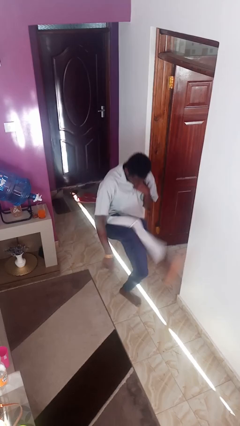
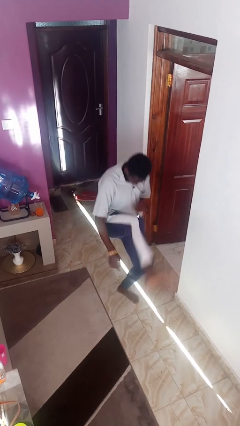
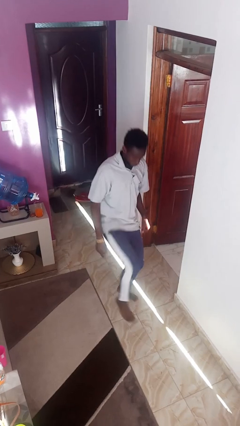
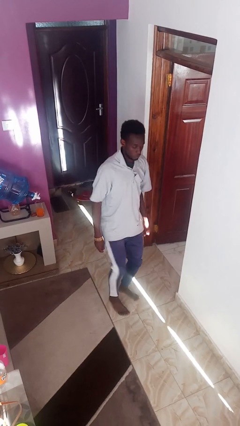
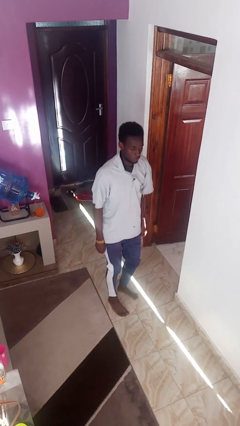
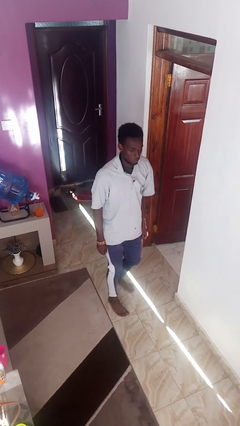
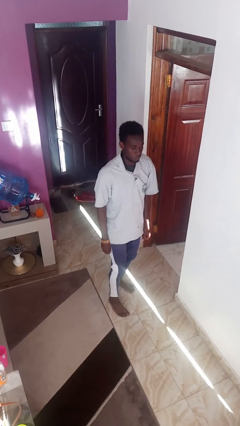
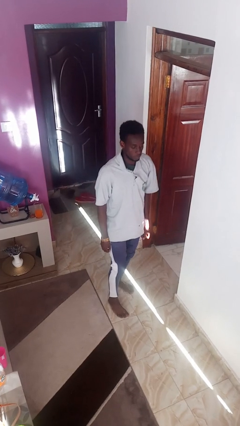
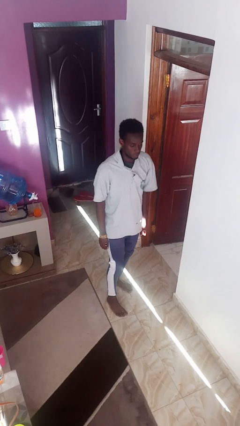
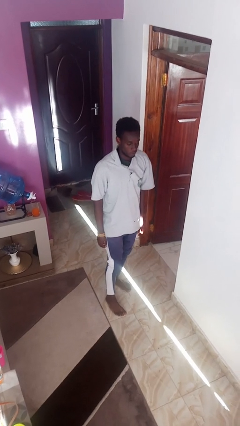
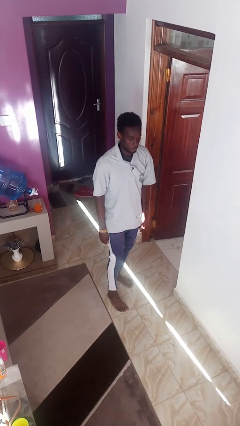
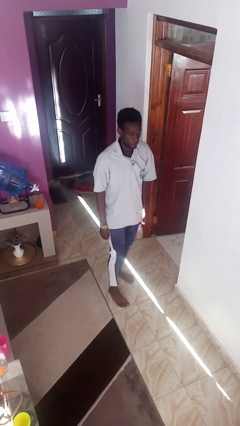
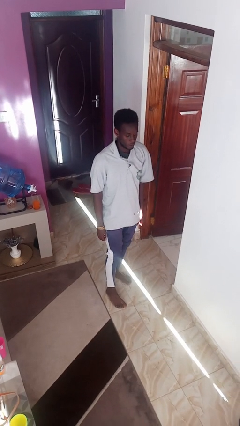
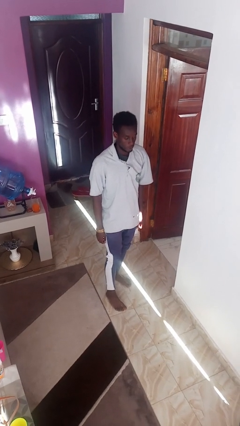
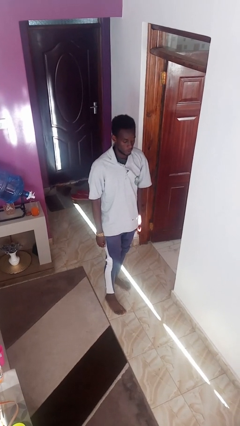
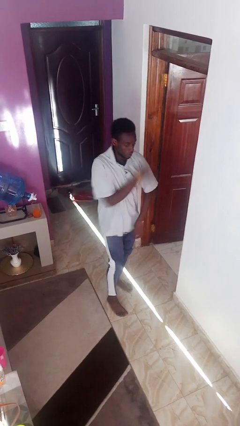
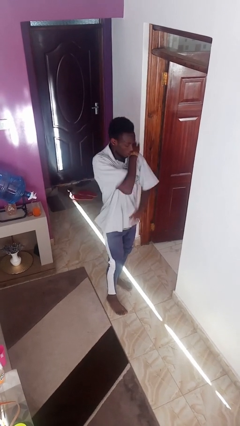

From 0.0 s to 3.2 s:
person karate kicks

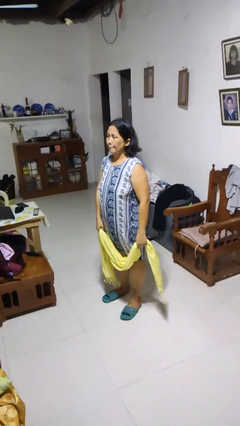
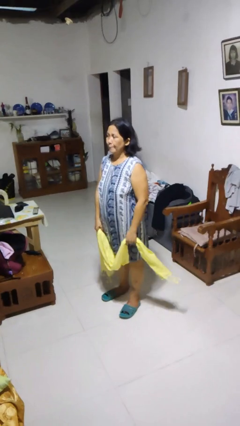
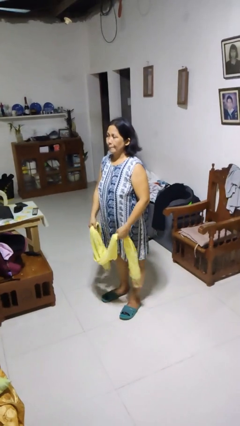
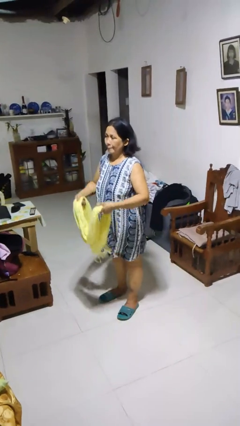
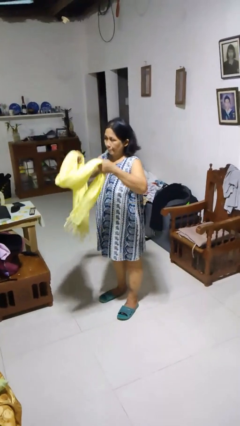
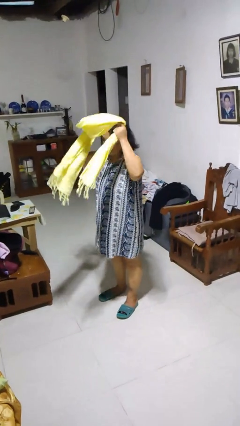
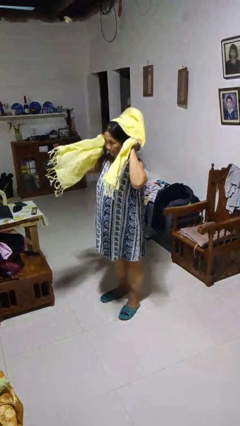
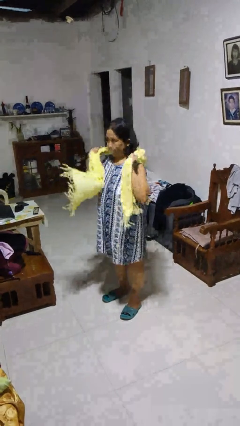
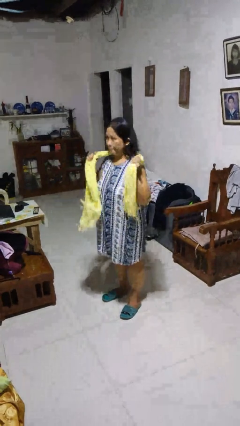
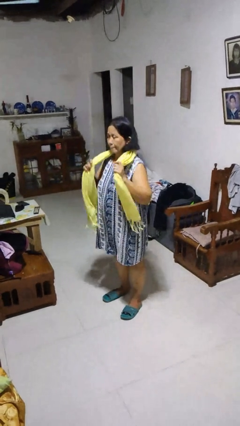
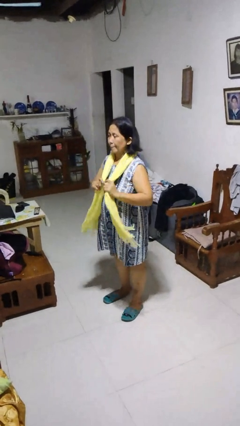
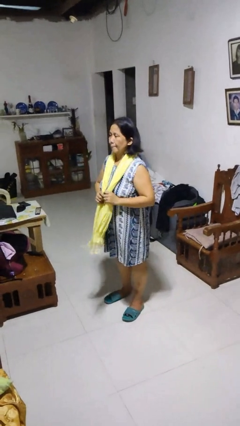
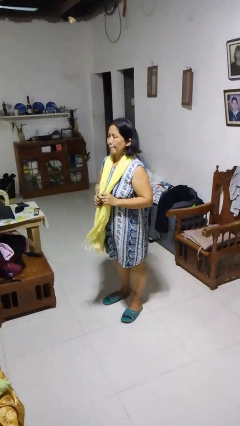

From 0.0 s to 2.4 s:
person puts on scarf

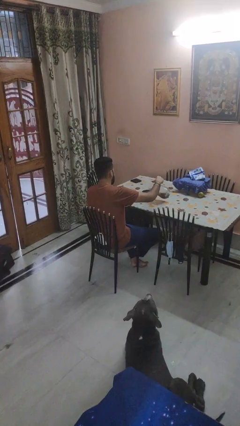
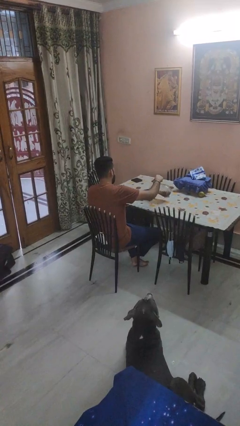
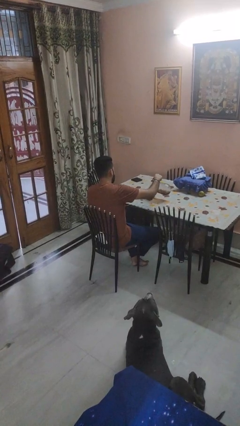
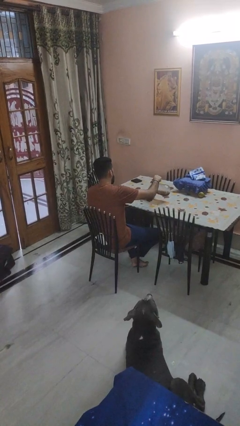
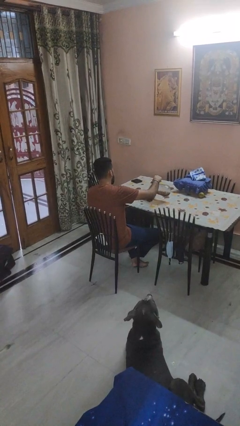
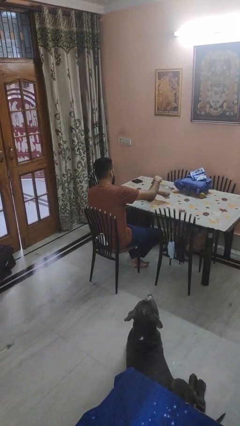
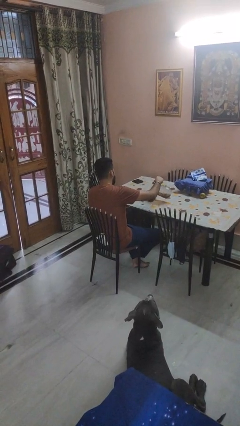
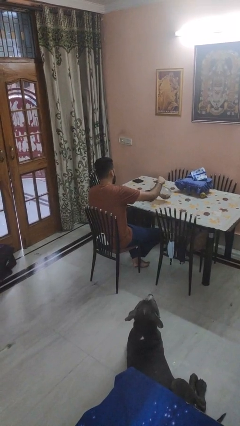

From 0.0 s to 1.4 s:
person pours into bowl

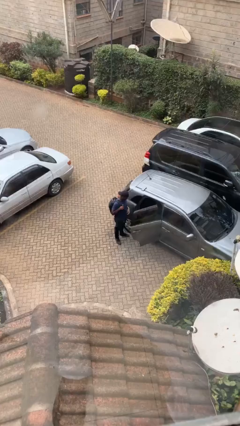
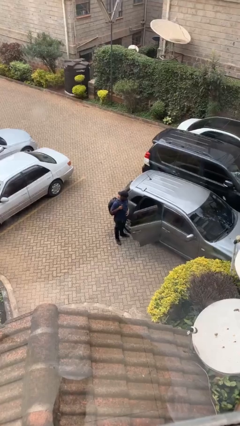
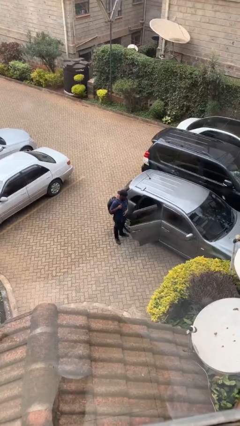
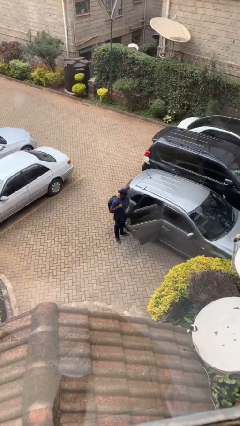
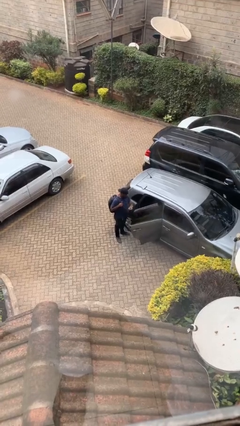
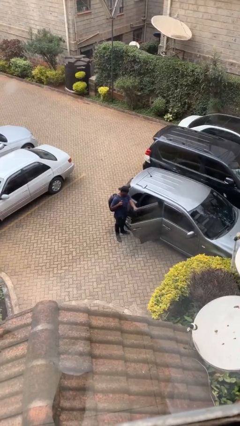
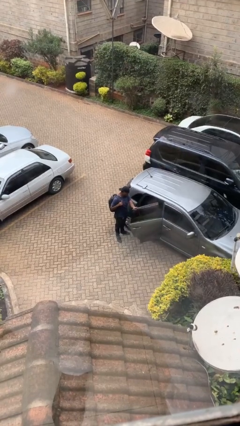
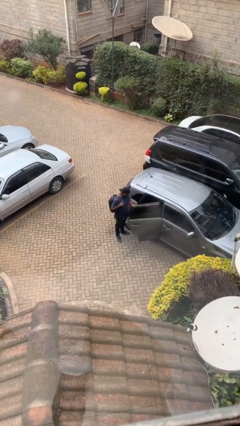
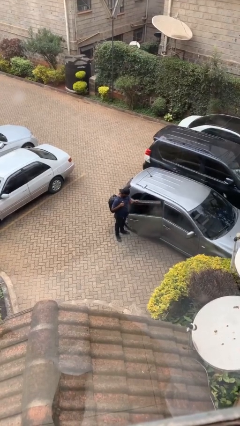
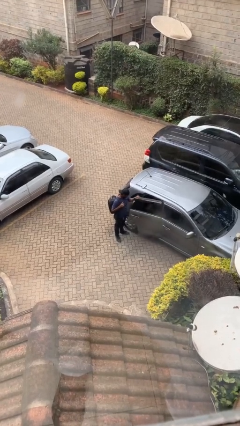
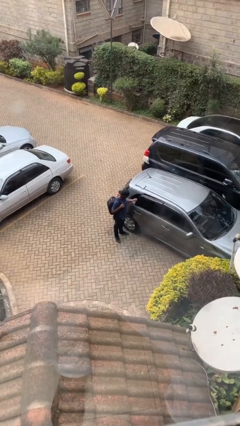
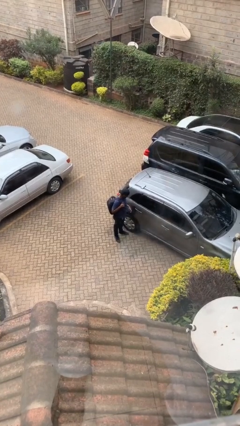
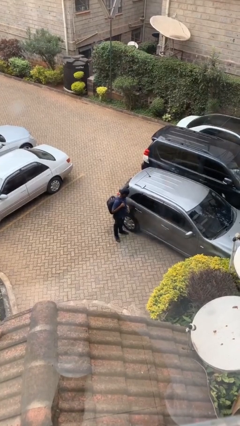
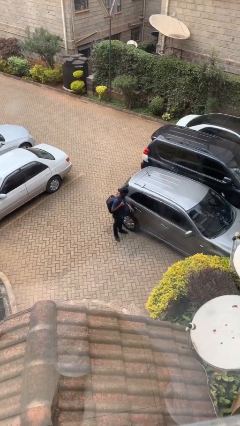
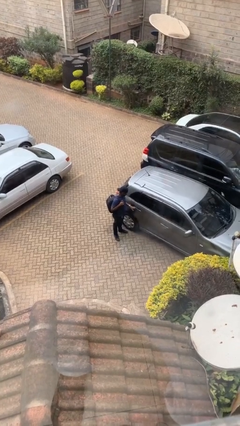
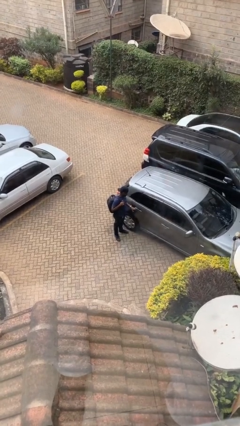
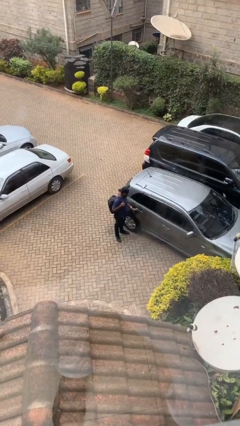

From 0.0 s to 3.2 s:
person closes car door

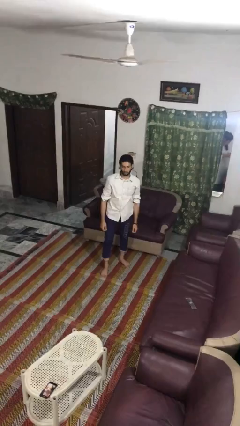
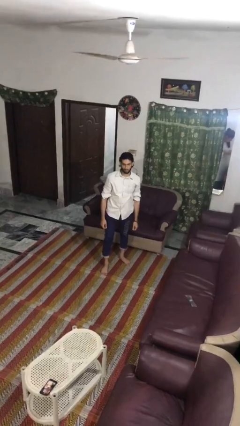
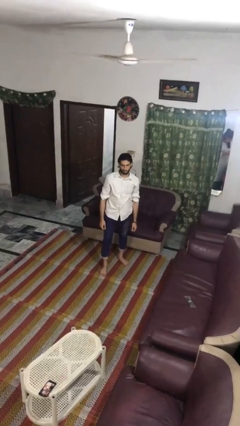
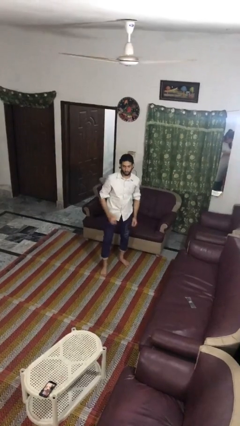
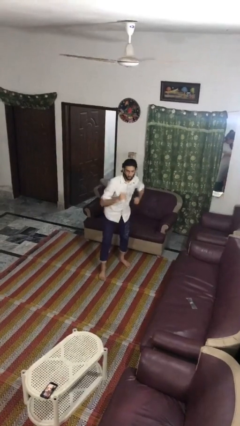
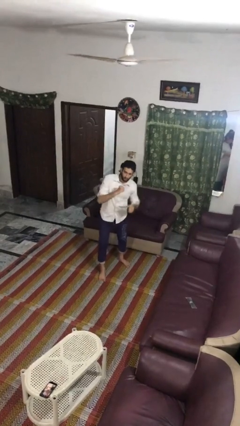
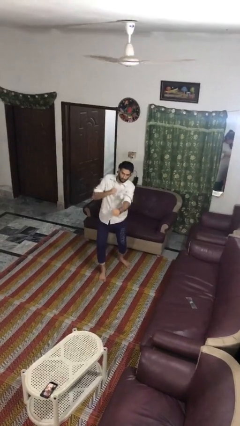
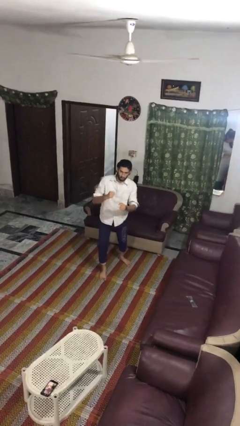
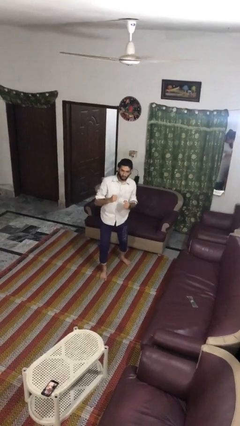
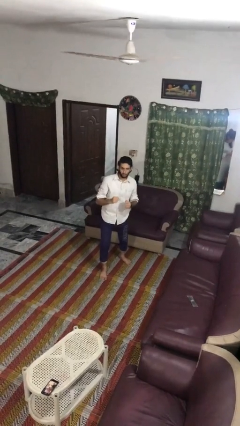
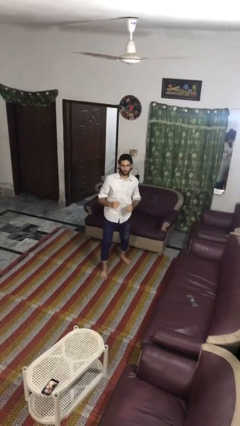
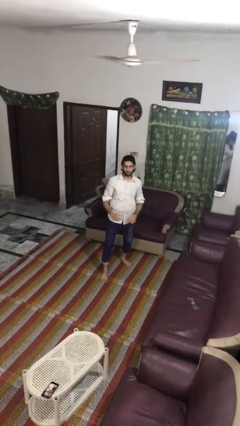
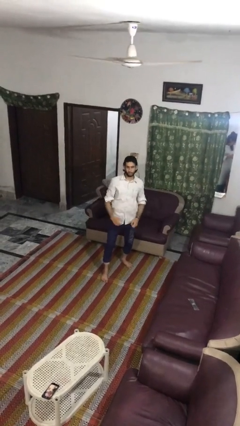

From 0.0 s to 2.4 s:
person punches

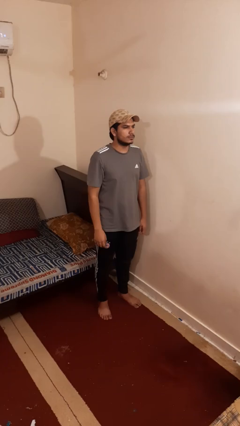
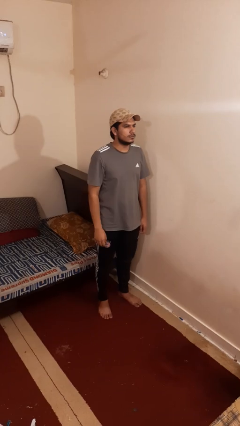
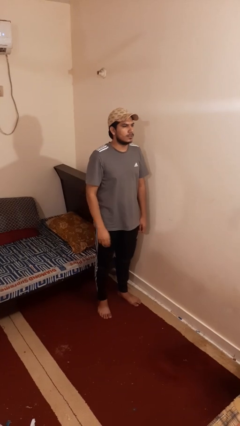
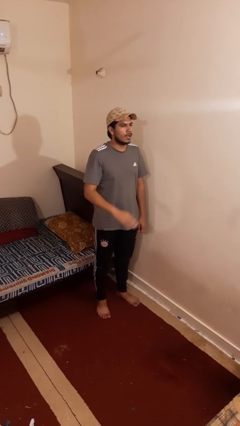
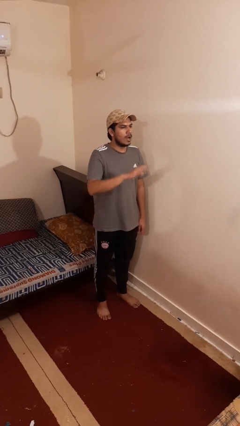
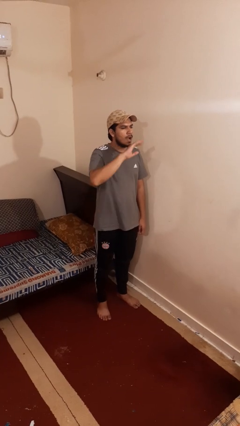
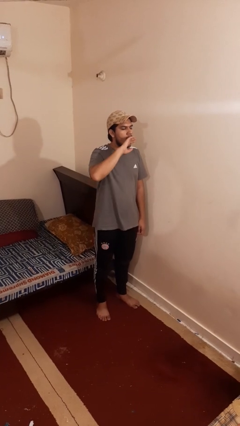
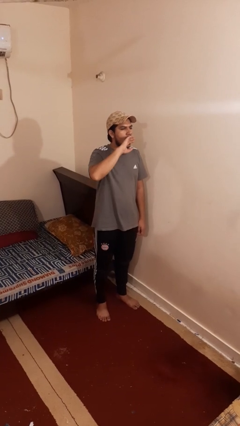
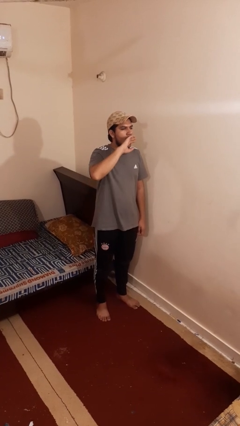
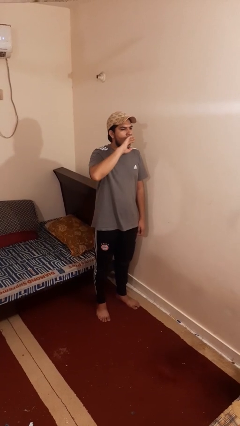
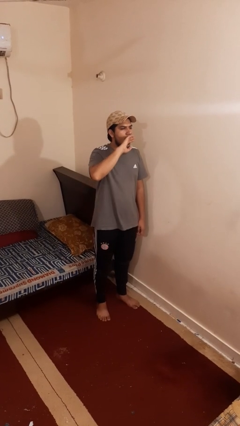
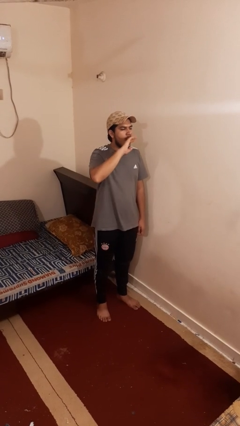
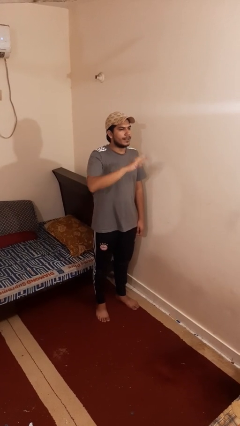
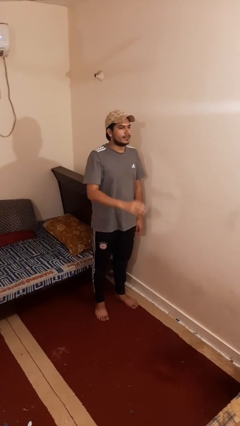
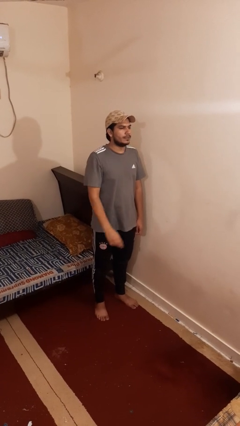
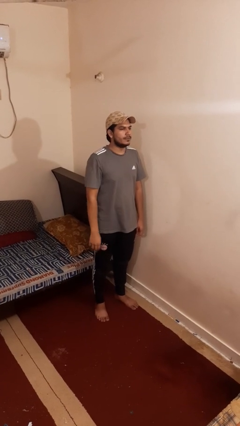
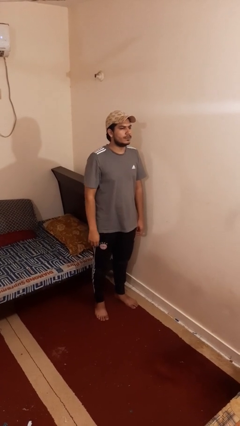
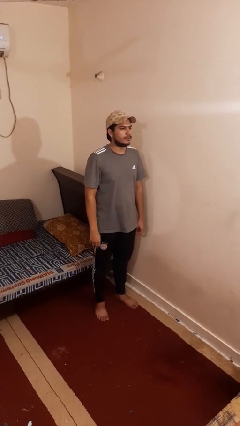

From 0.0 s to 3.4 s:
person yawns

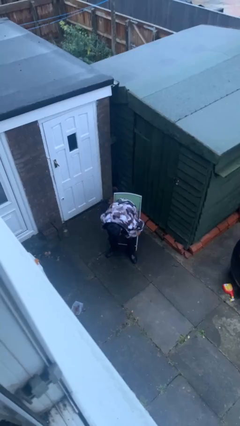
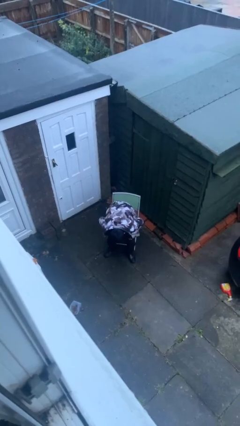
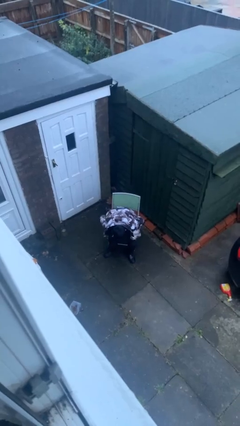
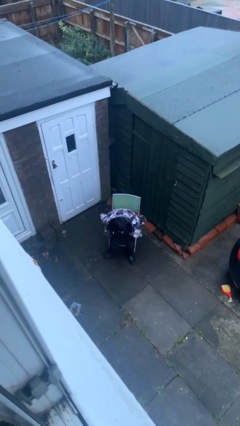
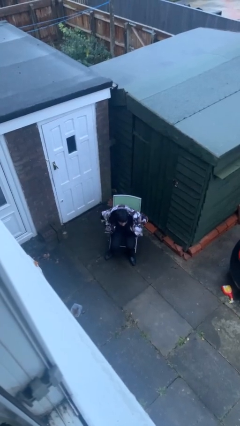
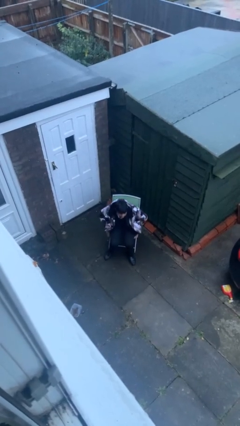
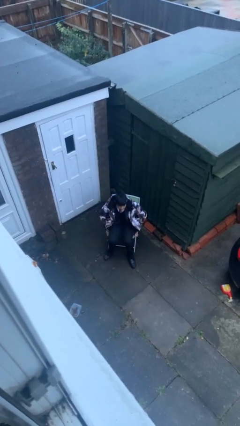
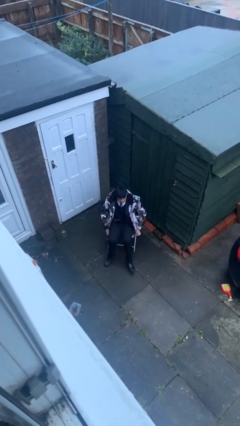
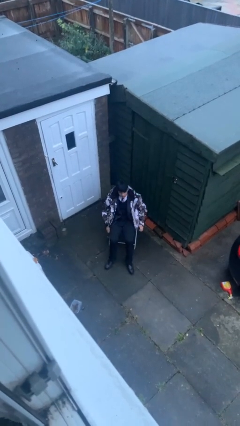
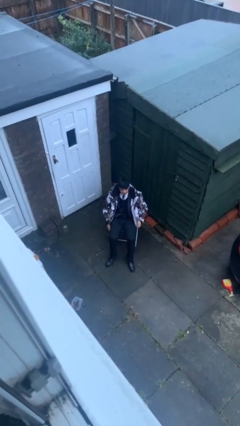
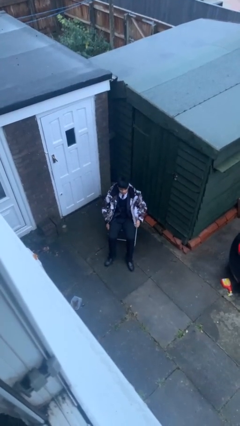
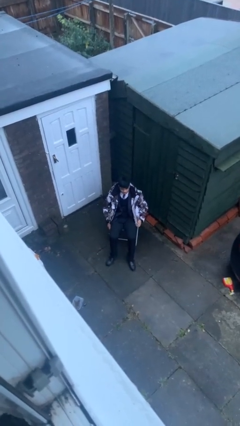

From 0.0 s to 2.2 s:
person sits down
